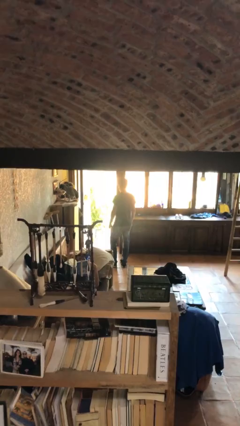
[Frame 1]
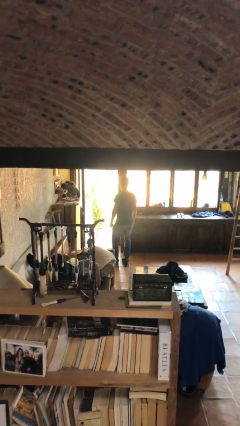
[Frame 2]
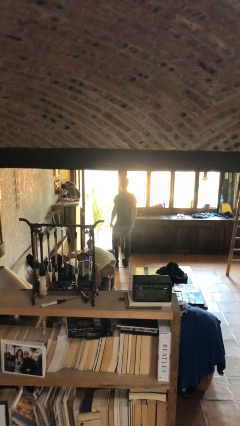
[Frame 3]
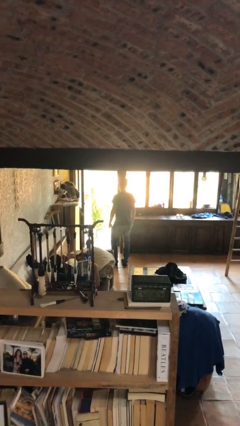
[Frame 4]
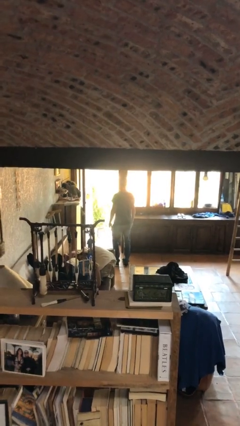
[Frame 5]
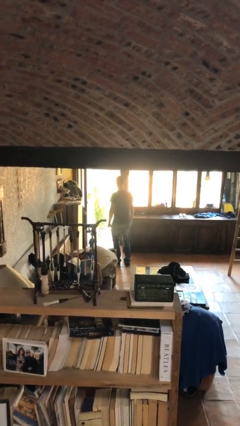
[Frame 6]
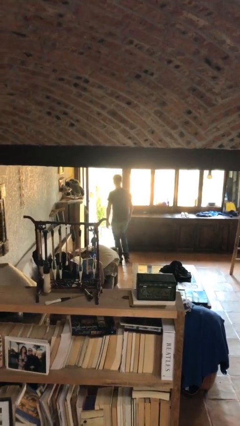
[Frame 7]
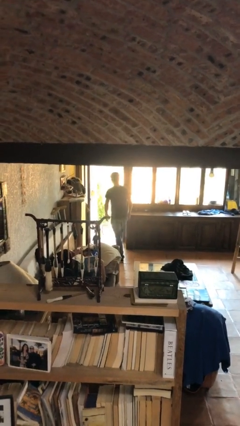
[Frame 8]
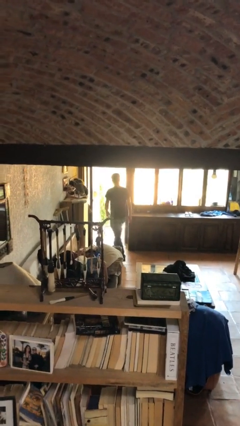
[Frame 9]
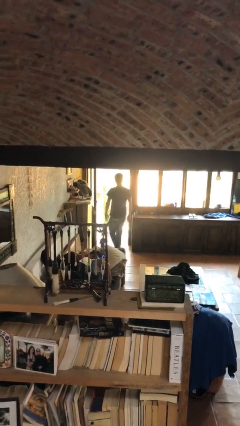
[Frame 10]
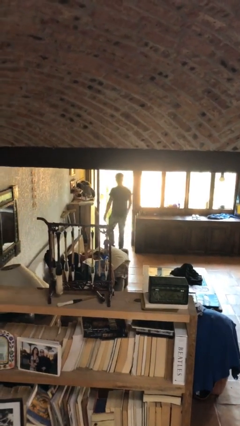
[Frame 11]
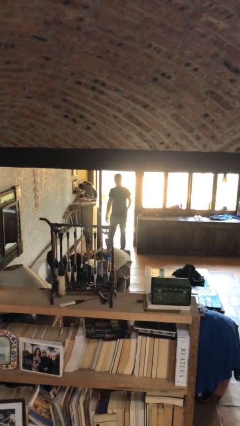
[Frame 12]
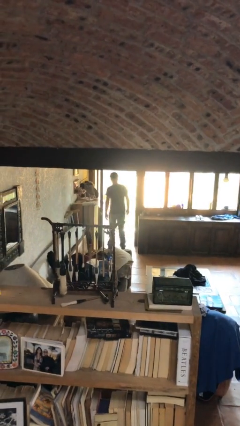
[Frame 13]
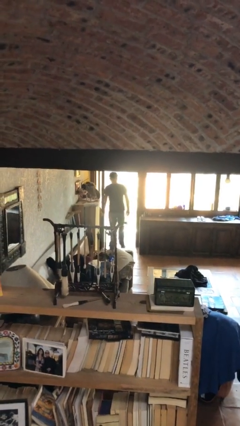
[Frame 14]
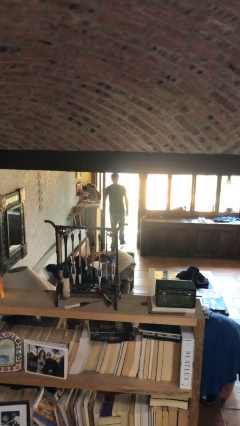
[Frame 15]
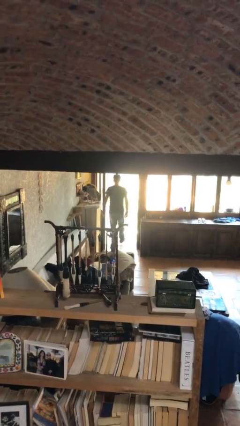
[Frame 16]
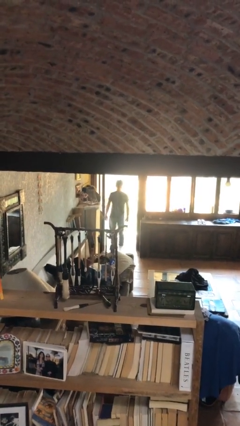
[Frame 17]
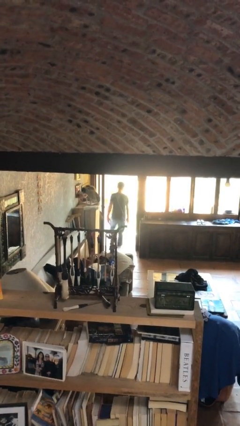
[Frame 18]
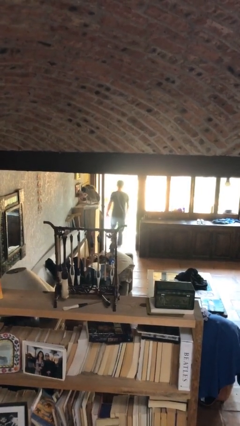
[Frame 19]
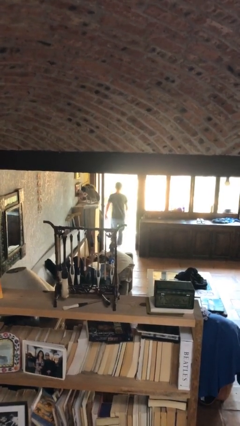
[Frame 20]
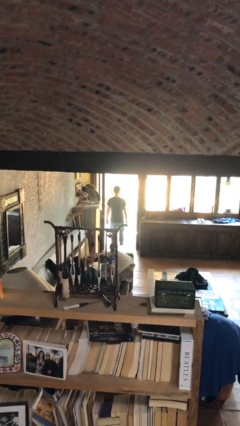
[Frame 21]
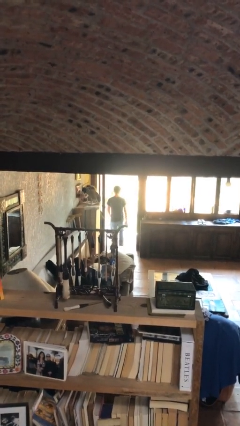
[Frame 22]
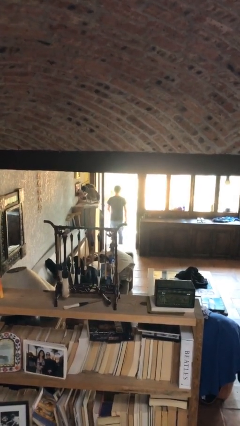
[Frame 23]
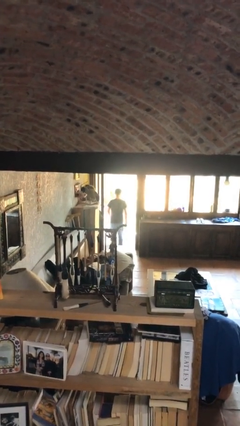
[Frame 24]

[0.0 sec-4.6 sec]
person exits scene through structure

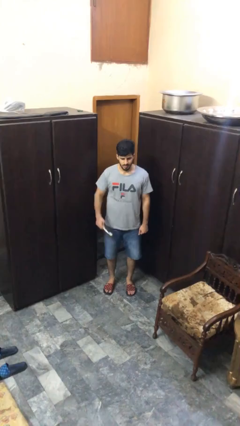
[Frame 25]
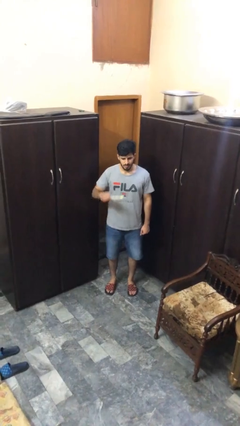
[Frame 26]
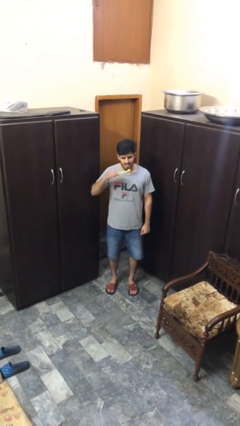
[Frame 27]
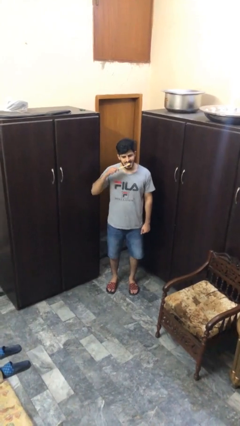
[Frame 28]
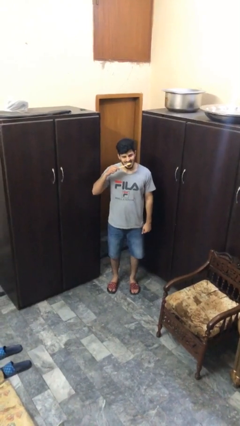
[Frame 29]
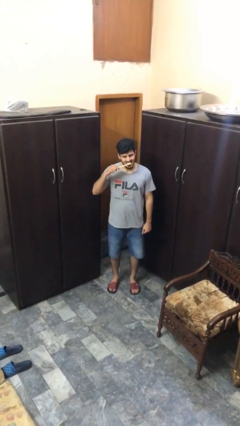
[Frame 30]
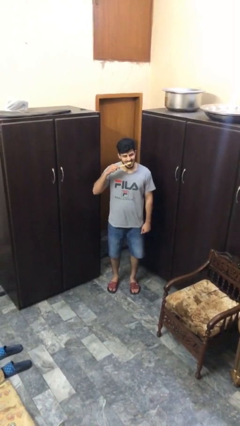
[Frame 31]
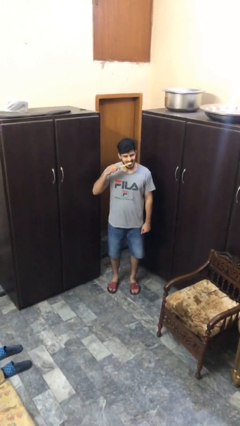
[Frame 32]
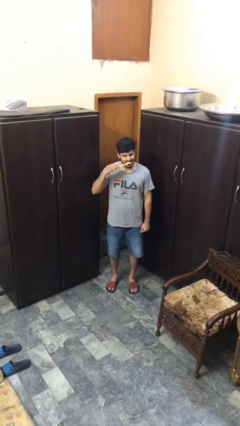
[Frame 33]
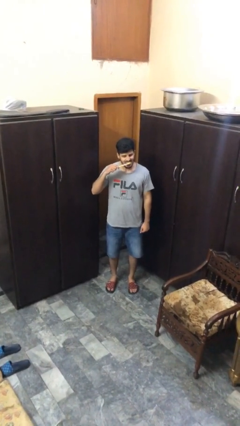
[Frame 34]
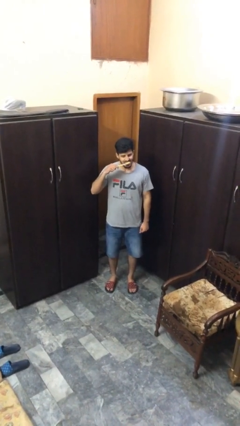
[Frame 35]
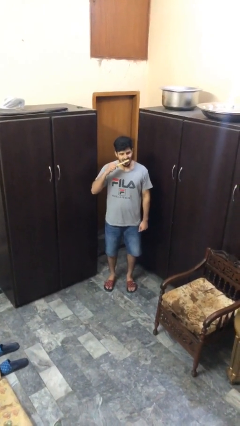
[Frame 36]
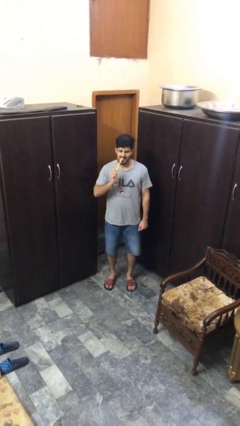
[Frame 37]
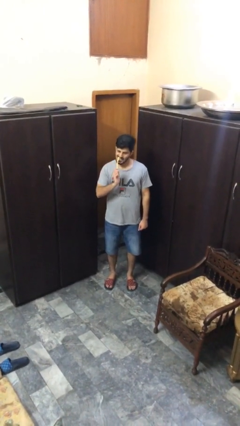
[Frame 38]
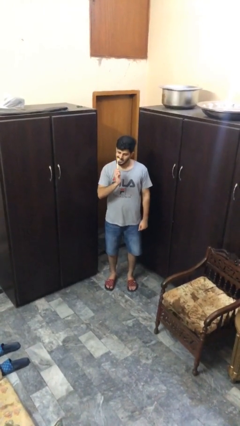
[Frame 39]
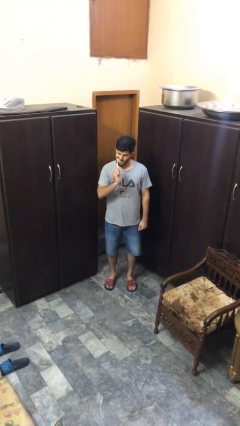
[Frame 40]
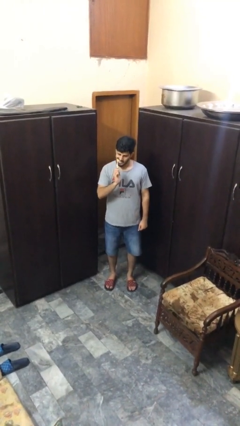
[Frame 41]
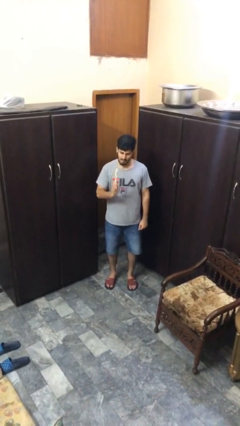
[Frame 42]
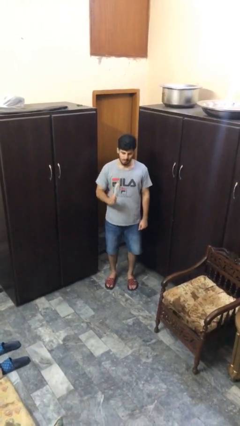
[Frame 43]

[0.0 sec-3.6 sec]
person brushes teeth

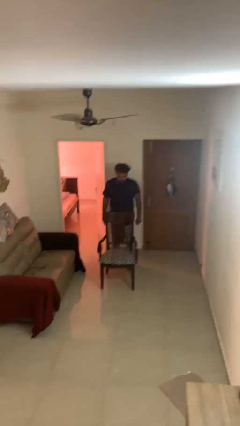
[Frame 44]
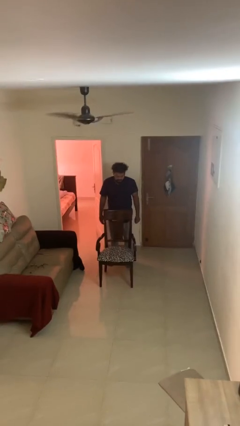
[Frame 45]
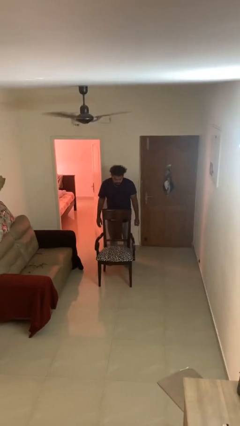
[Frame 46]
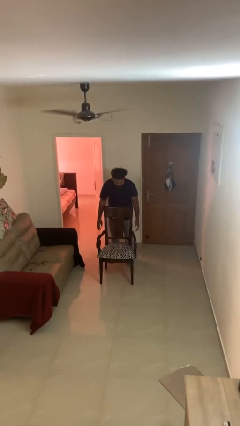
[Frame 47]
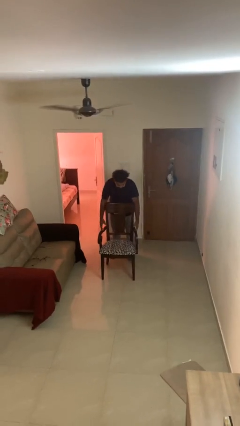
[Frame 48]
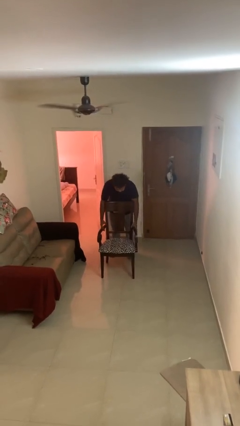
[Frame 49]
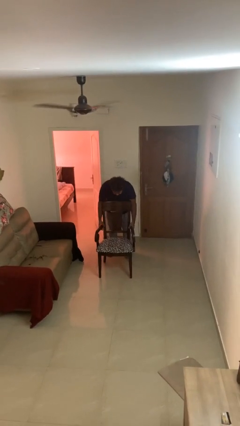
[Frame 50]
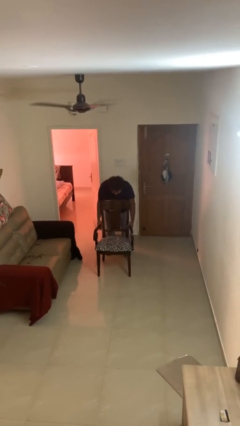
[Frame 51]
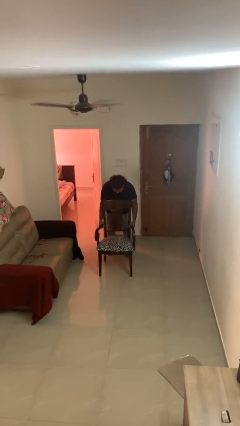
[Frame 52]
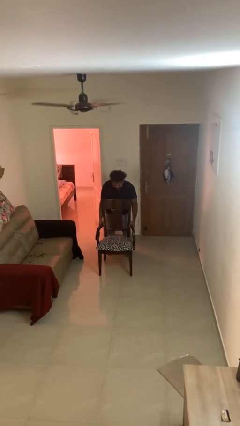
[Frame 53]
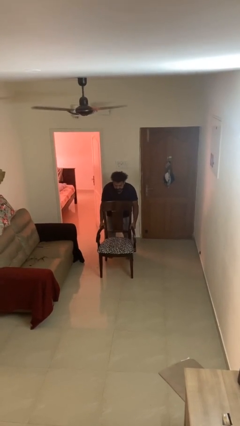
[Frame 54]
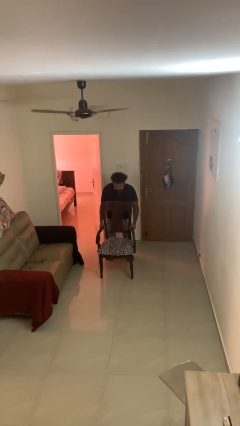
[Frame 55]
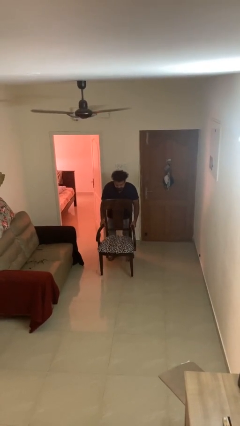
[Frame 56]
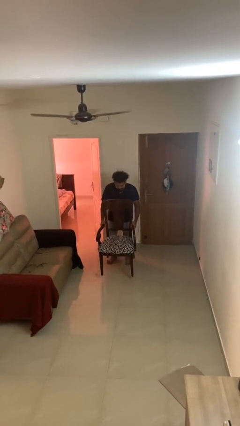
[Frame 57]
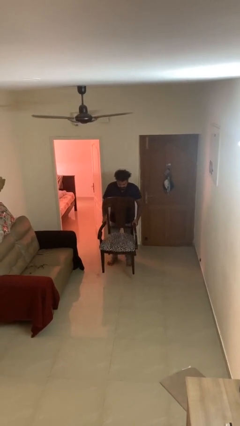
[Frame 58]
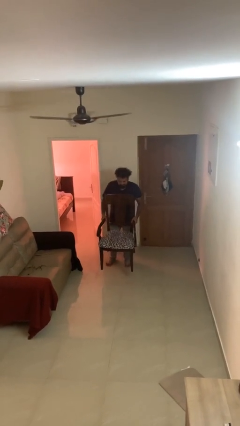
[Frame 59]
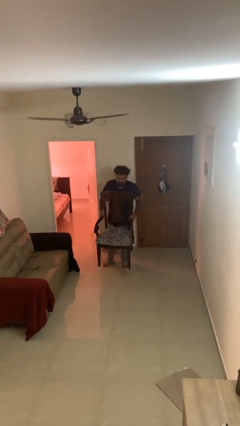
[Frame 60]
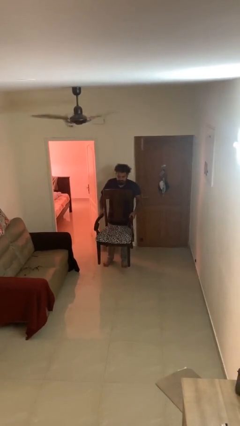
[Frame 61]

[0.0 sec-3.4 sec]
person picks up object from floor

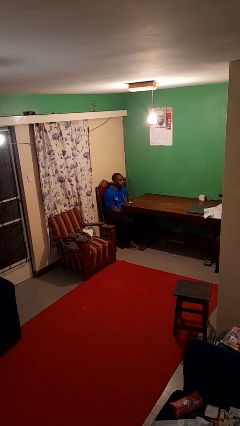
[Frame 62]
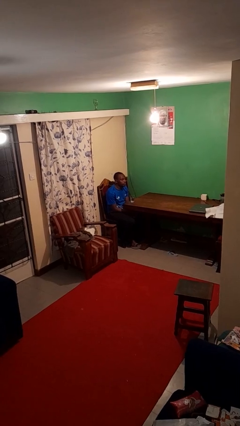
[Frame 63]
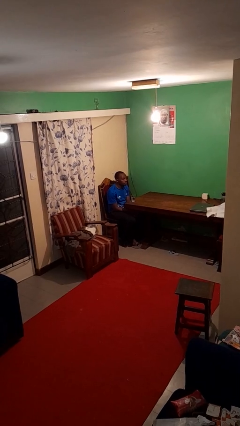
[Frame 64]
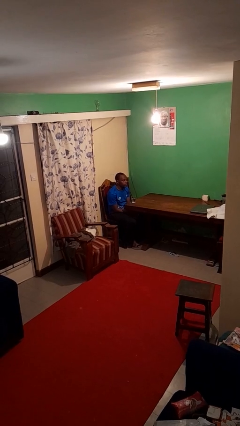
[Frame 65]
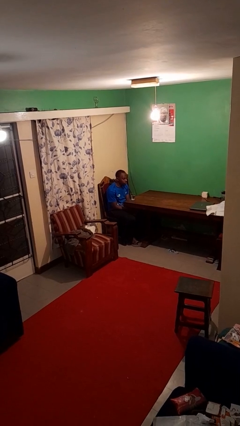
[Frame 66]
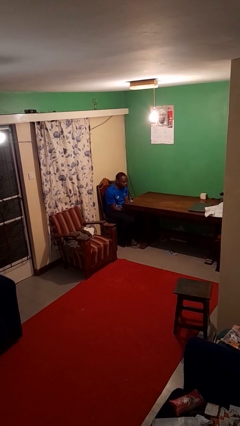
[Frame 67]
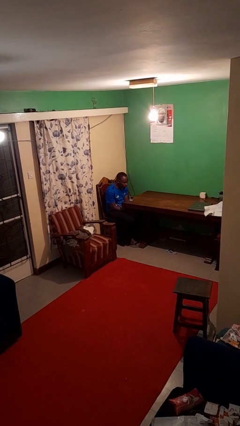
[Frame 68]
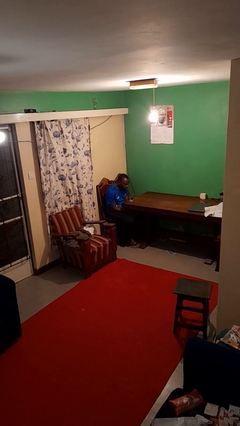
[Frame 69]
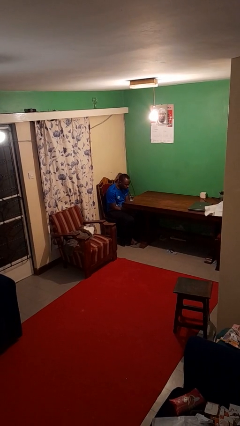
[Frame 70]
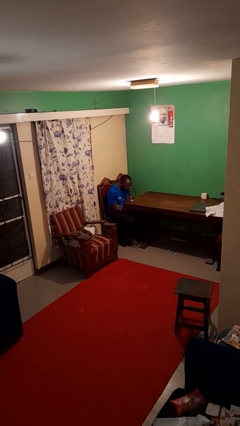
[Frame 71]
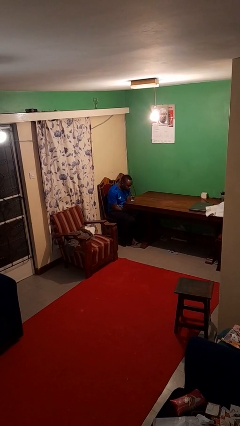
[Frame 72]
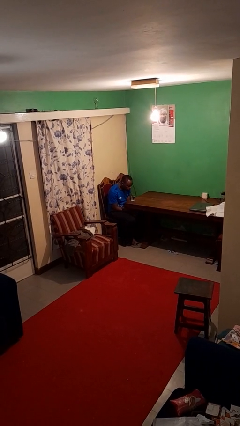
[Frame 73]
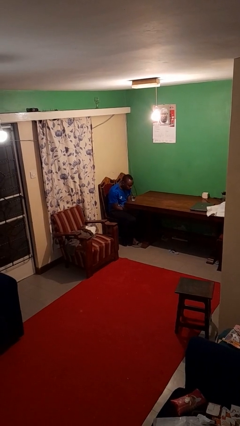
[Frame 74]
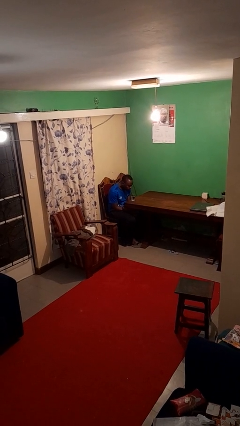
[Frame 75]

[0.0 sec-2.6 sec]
person drinks from straw

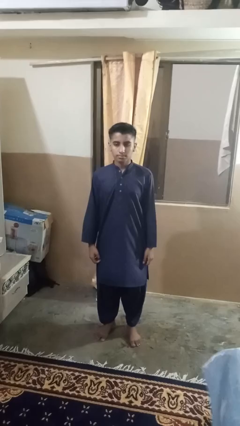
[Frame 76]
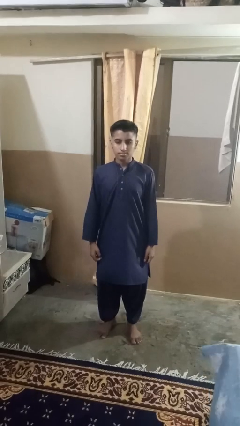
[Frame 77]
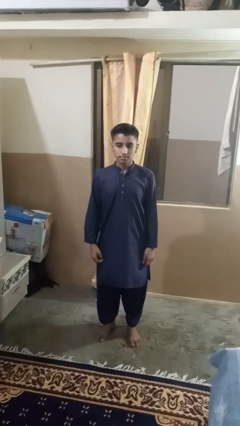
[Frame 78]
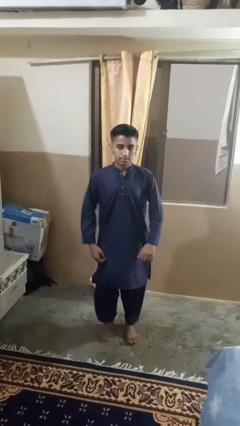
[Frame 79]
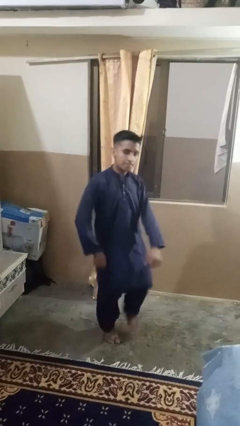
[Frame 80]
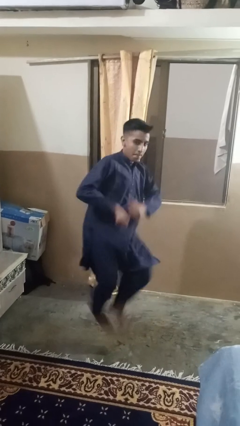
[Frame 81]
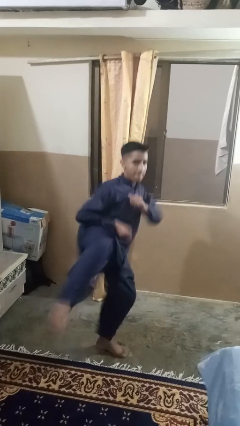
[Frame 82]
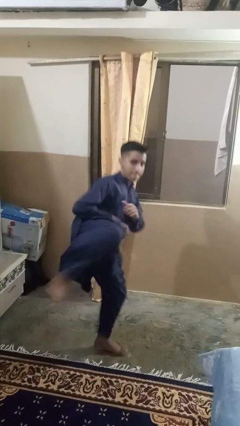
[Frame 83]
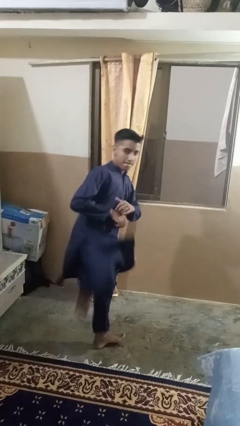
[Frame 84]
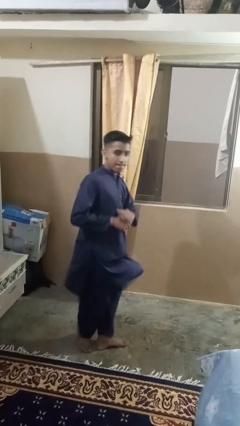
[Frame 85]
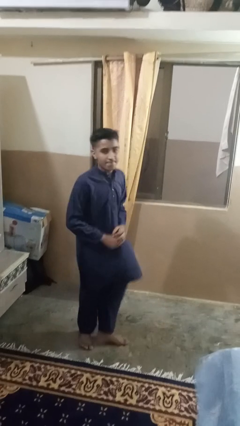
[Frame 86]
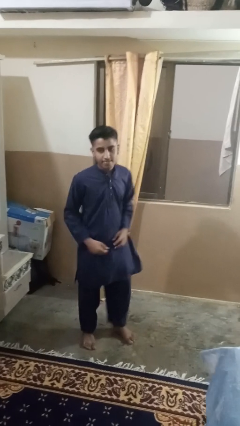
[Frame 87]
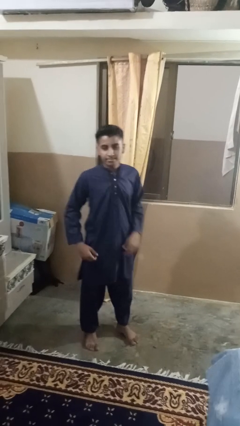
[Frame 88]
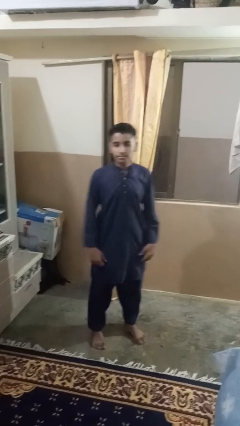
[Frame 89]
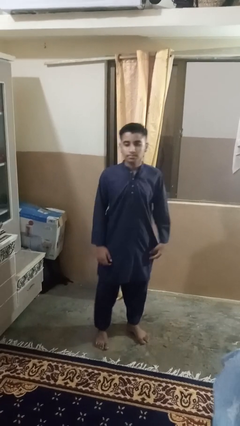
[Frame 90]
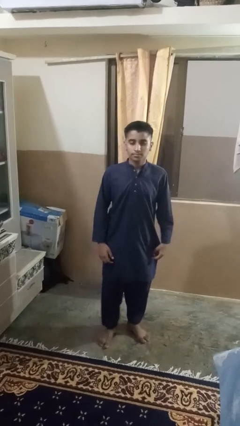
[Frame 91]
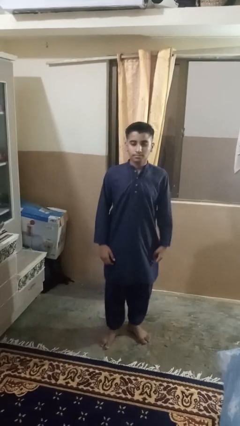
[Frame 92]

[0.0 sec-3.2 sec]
person karate kicks

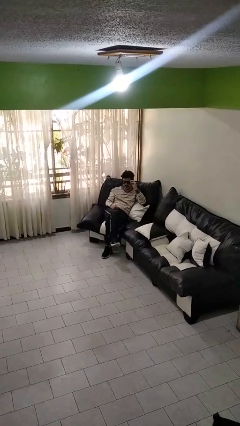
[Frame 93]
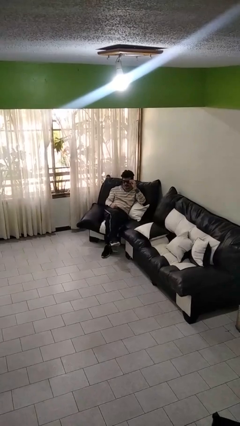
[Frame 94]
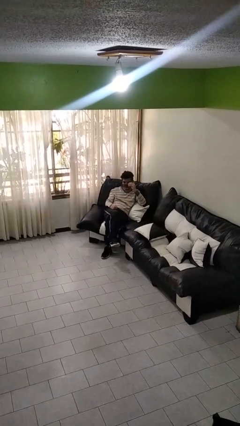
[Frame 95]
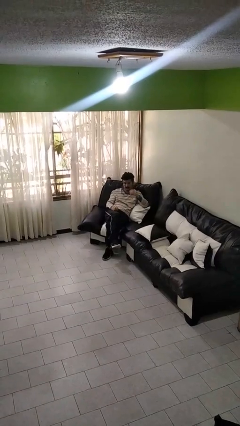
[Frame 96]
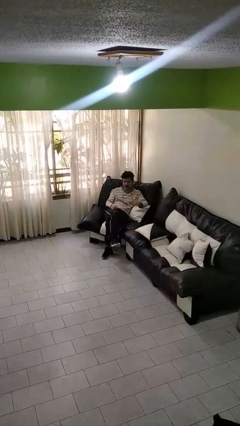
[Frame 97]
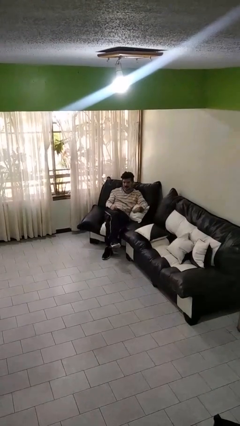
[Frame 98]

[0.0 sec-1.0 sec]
person takes off sunglasses
